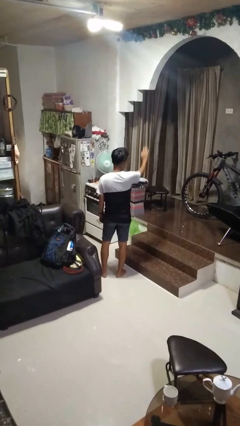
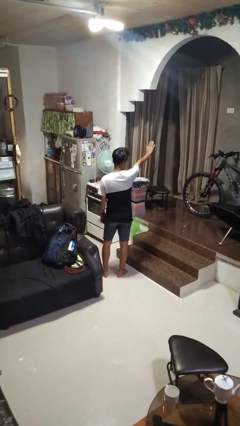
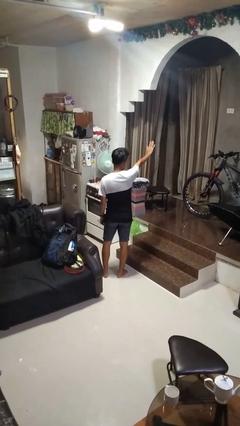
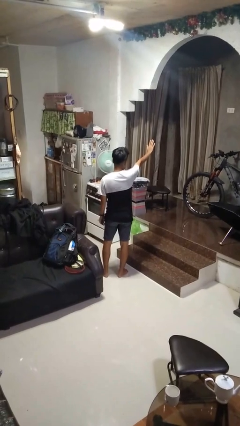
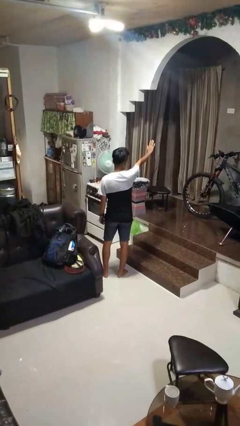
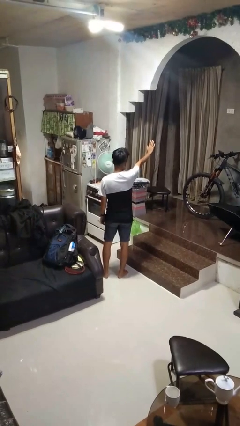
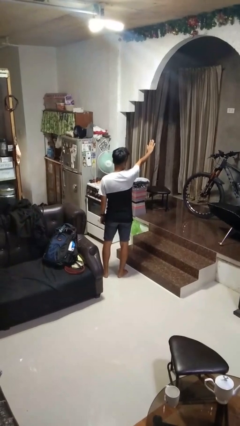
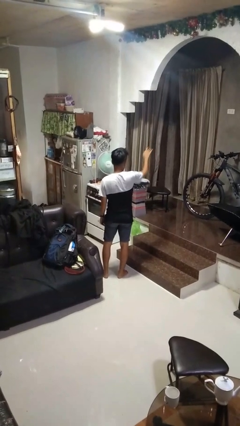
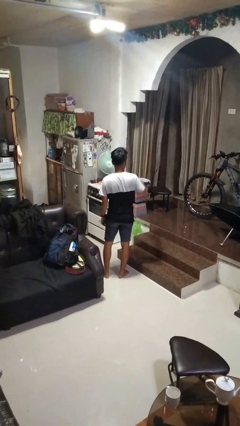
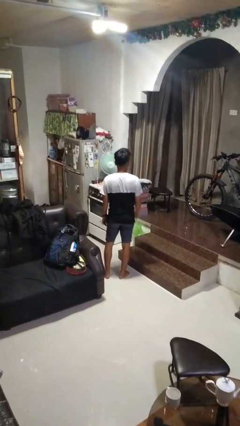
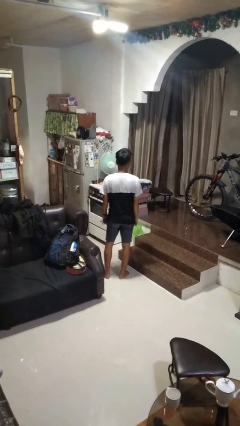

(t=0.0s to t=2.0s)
person gestures stop

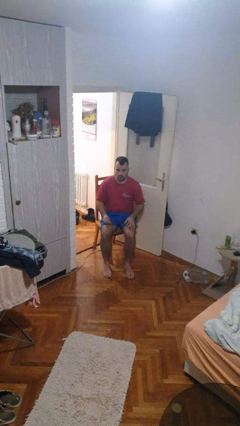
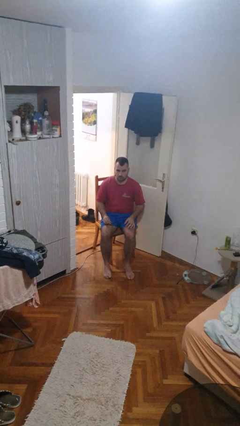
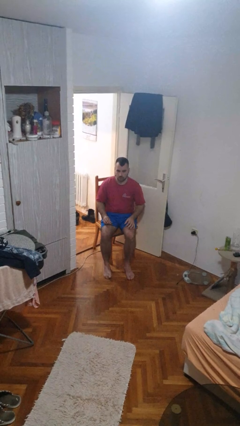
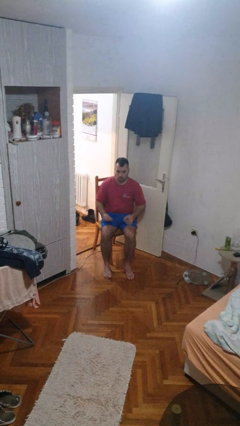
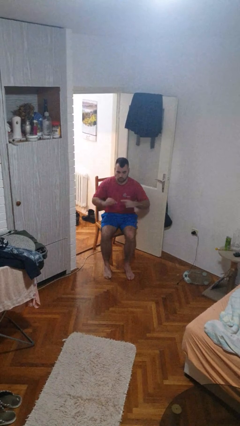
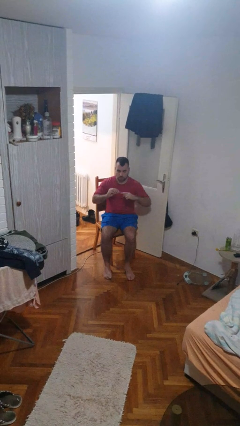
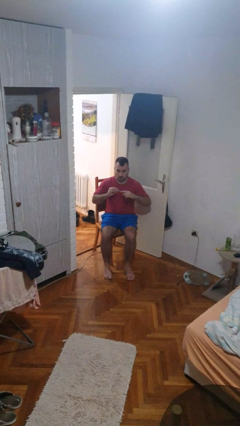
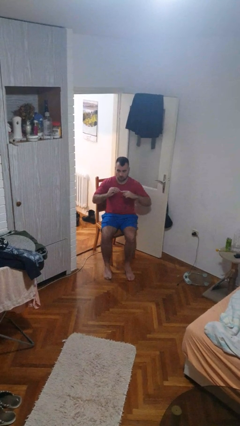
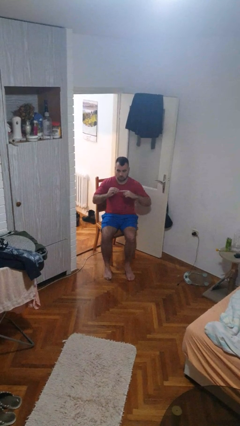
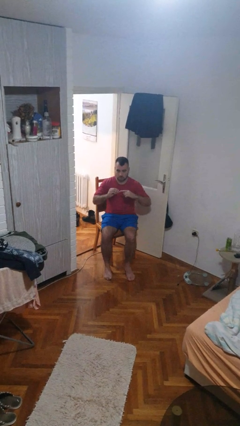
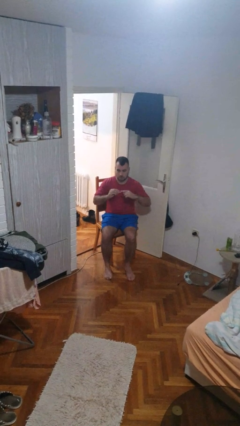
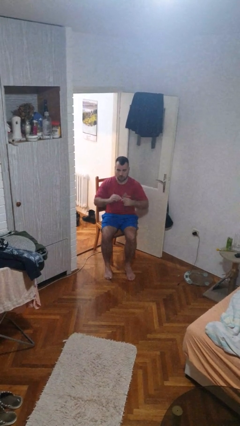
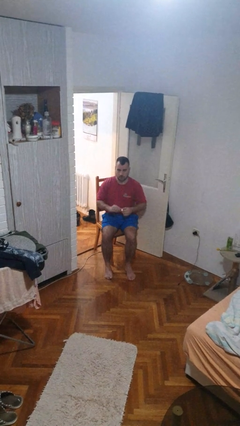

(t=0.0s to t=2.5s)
person clips fingernails

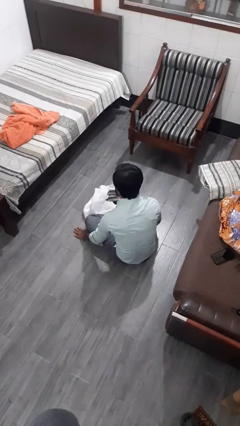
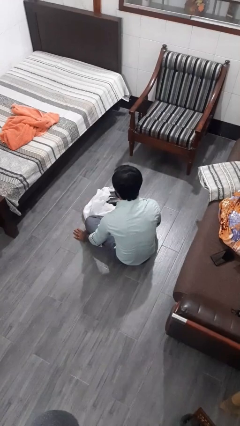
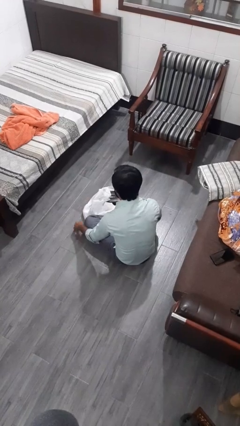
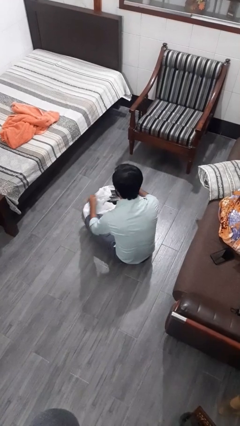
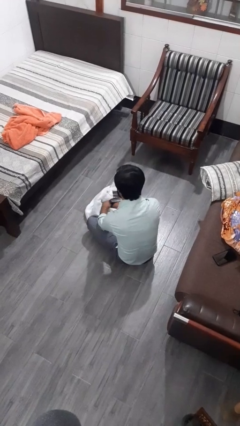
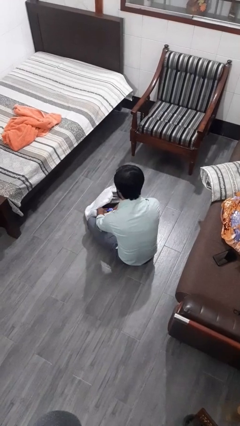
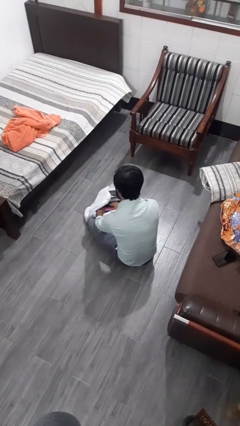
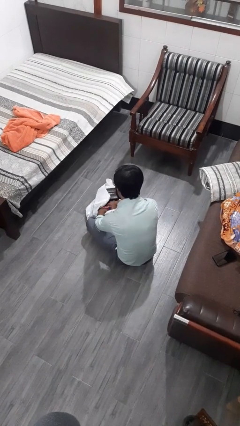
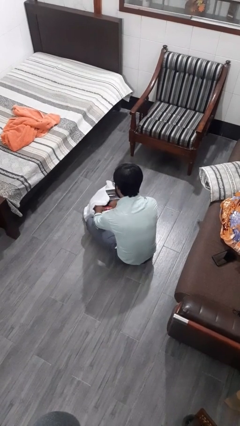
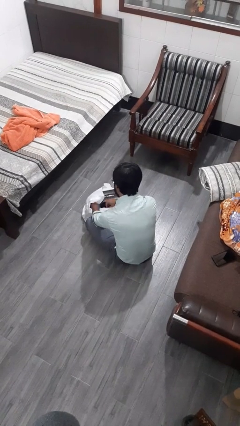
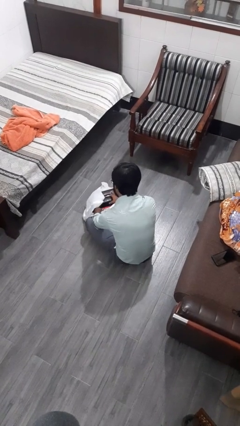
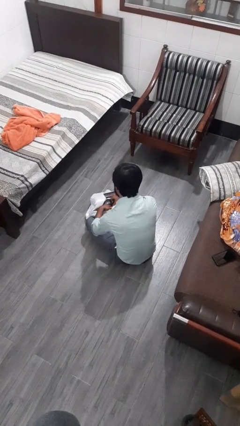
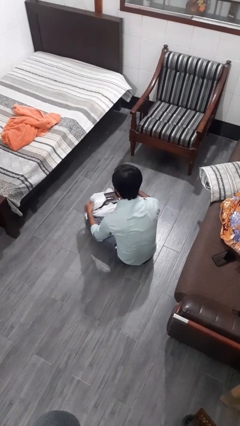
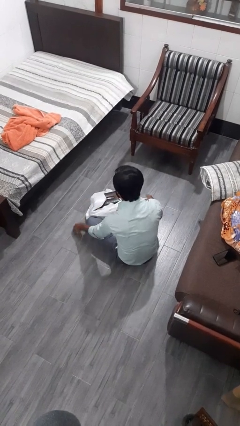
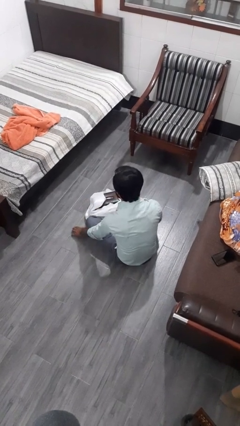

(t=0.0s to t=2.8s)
person searches in bag

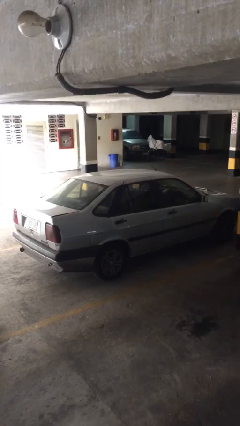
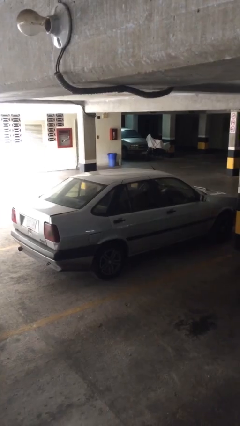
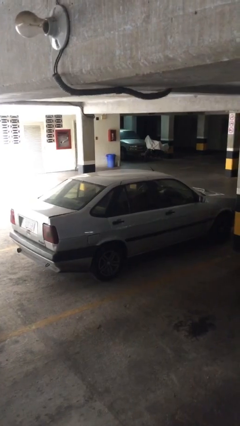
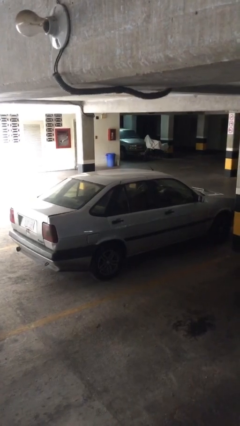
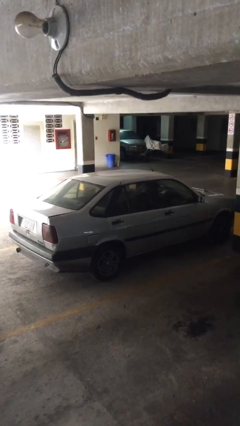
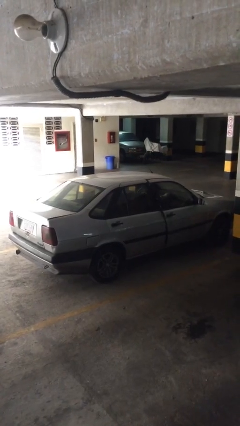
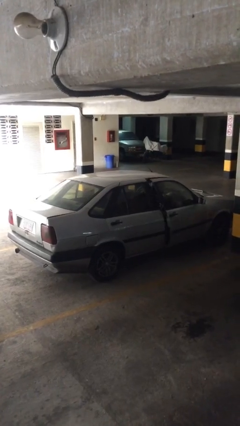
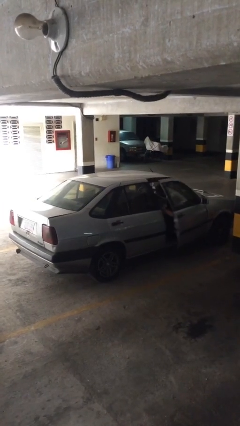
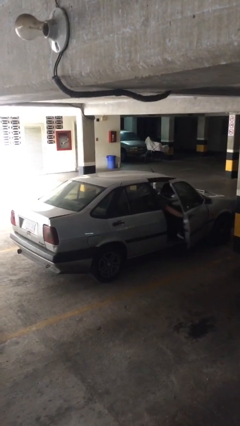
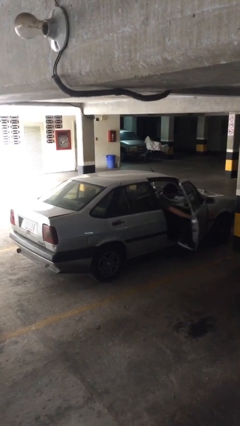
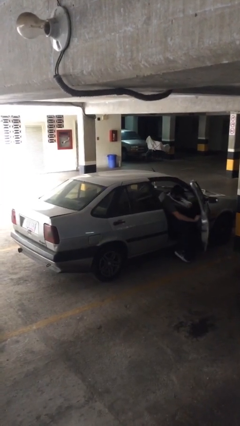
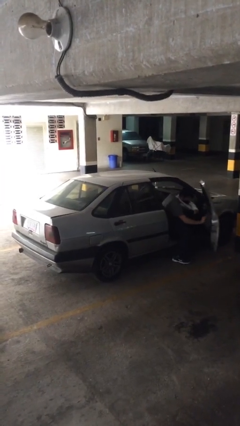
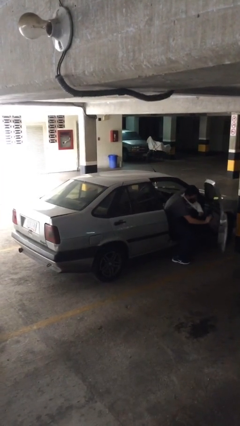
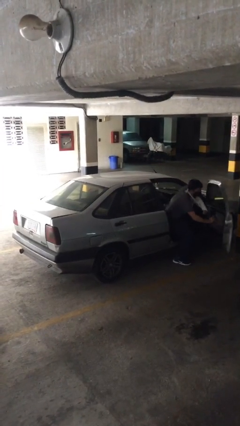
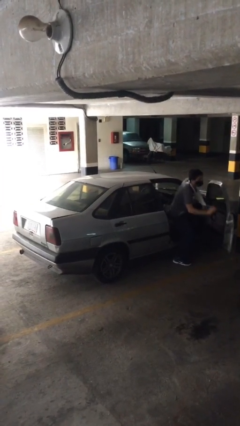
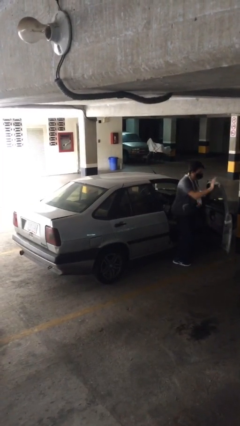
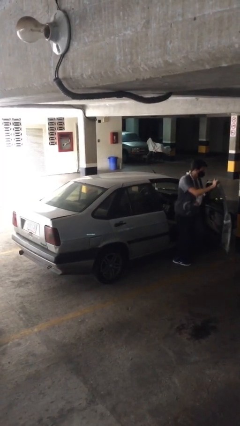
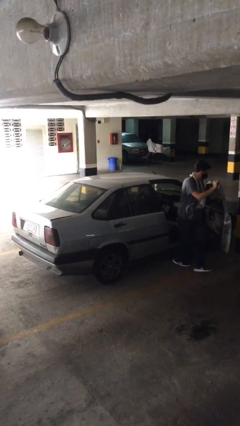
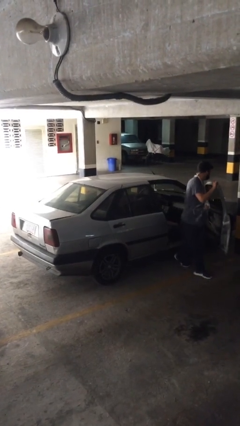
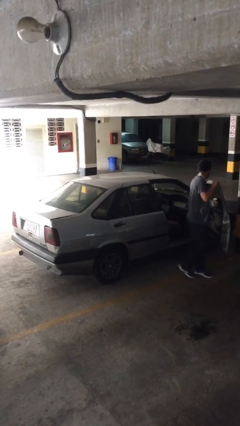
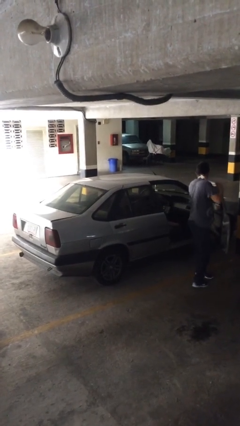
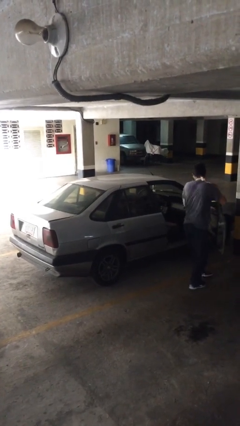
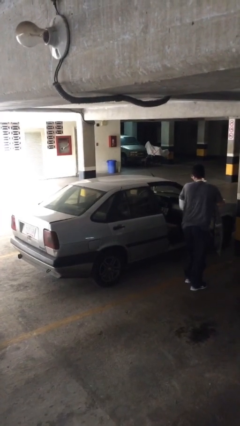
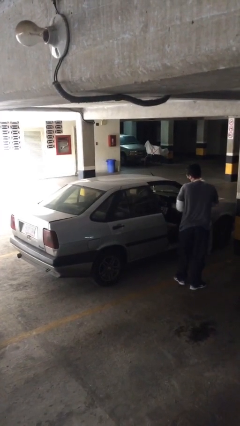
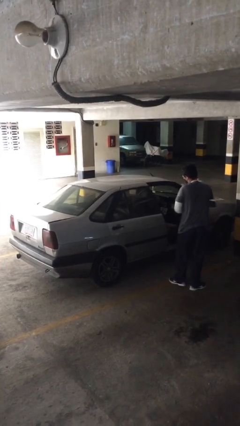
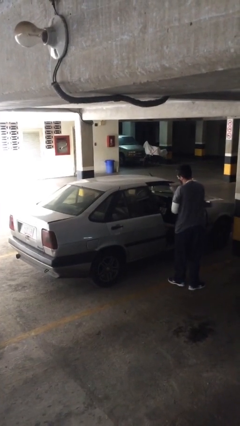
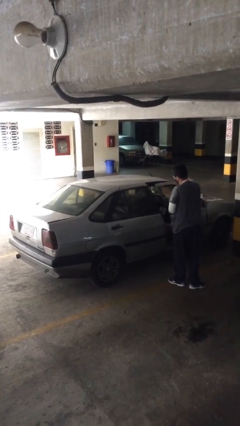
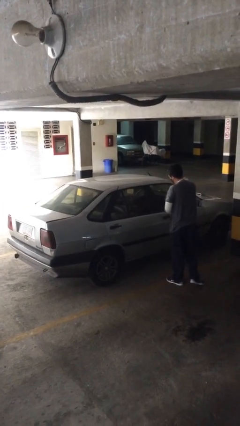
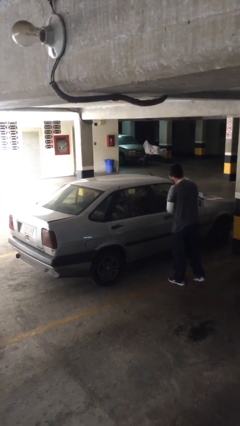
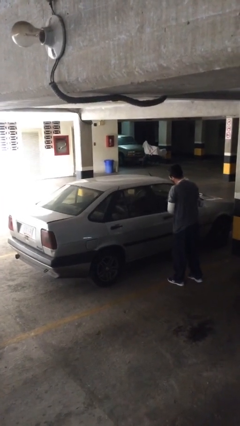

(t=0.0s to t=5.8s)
car drops off person

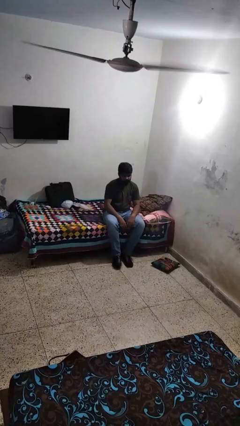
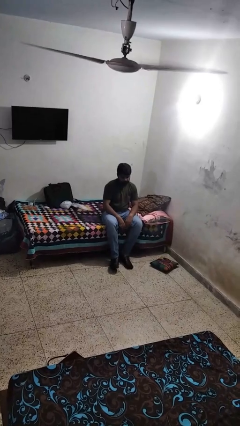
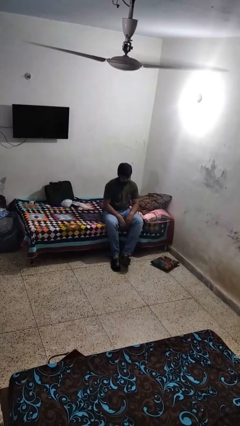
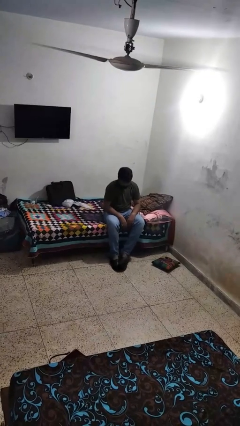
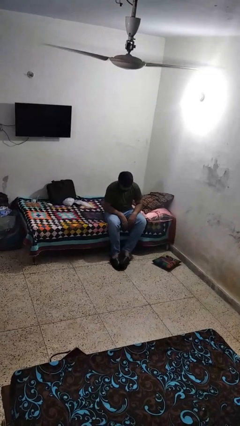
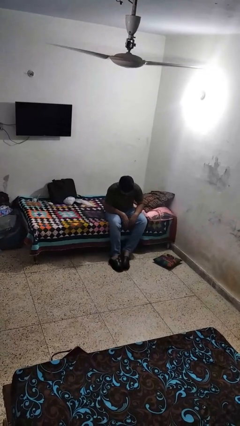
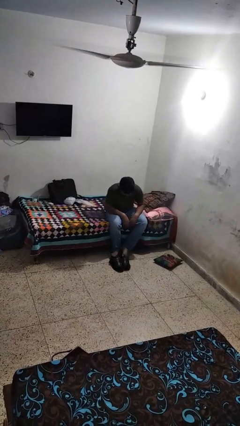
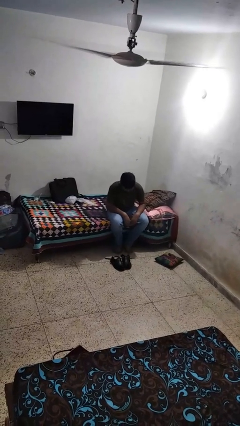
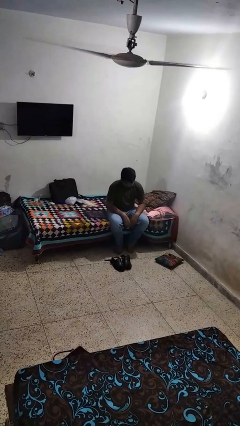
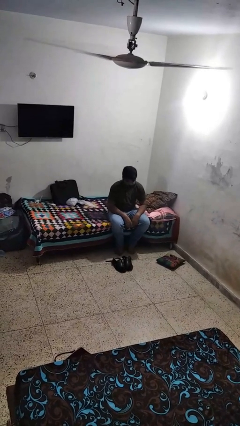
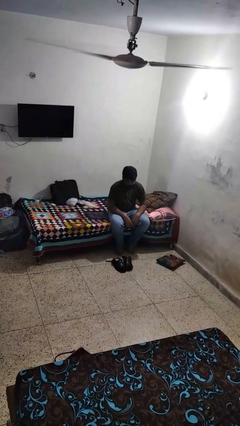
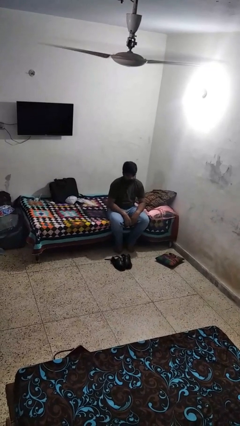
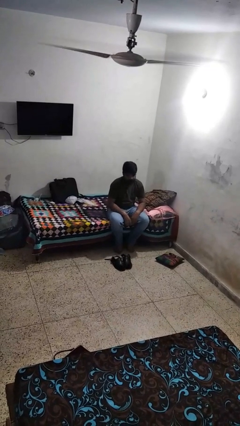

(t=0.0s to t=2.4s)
person takes off shoes

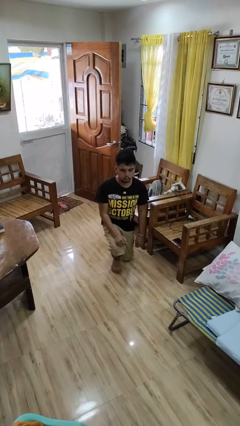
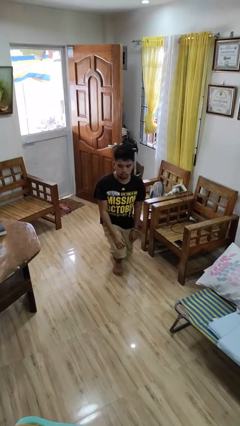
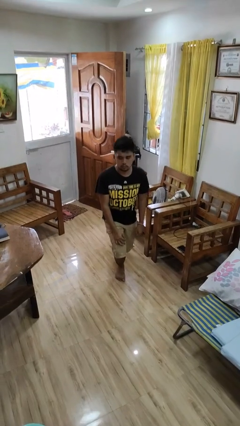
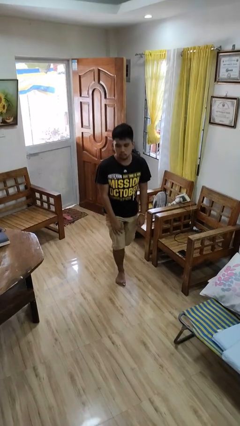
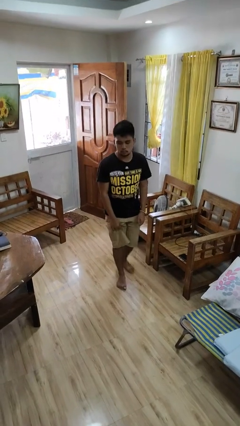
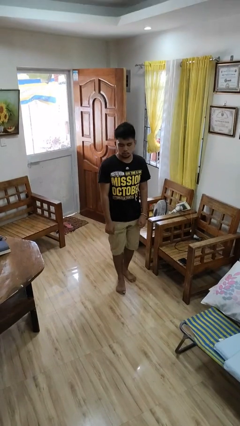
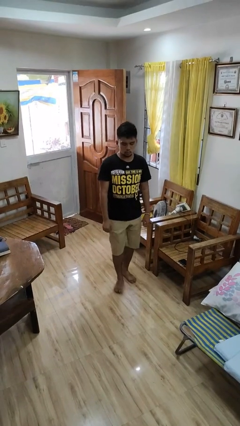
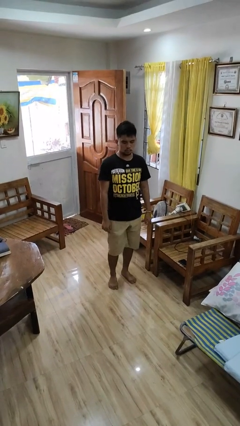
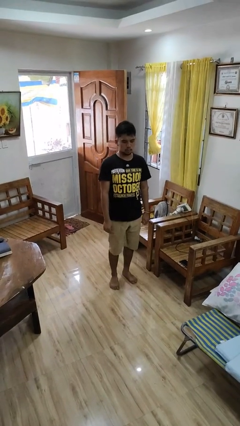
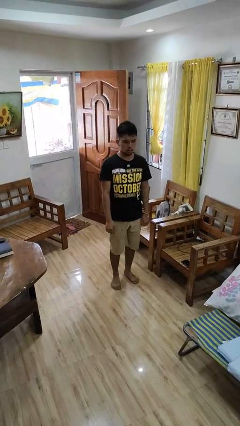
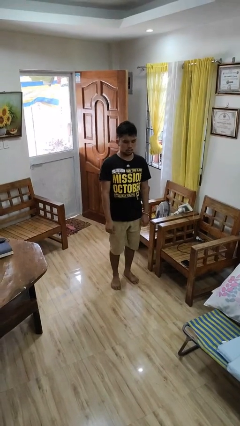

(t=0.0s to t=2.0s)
person stands up from floor
